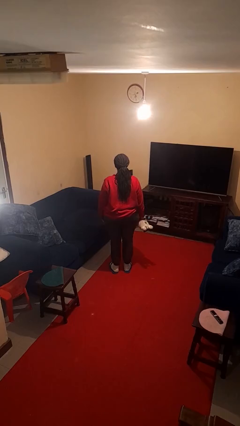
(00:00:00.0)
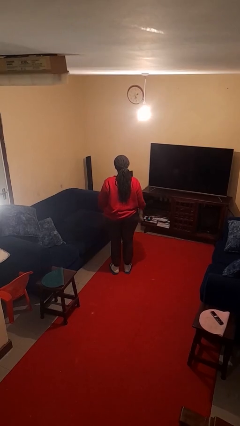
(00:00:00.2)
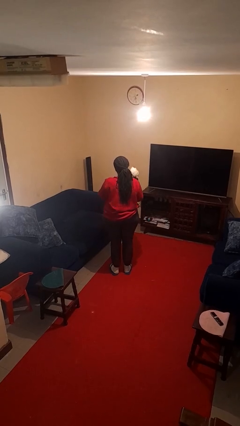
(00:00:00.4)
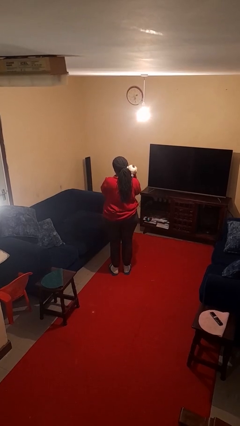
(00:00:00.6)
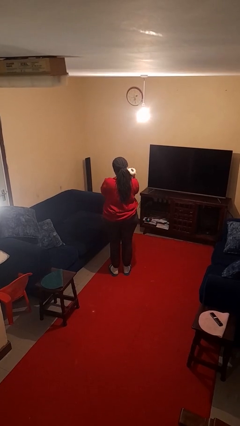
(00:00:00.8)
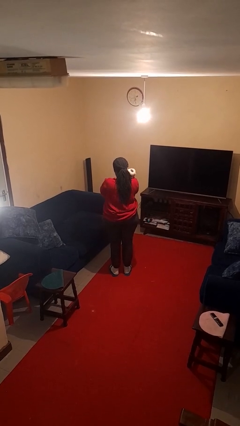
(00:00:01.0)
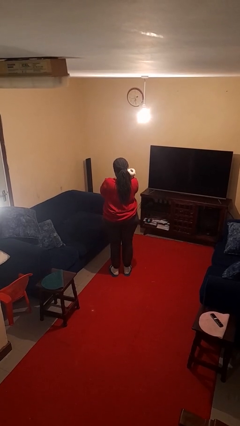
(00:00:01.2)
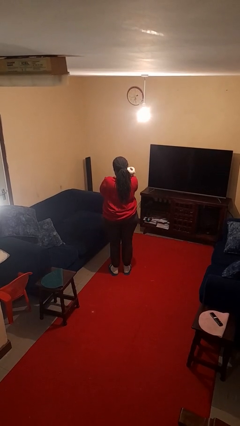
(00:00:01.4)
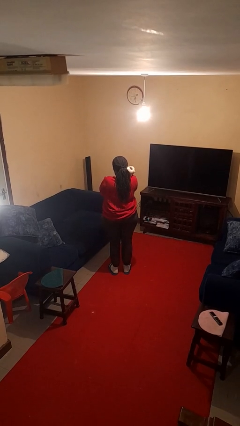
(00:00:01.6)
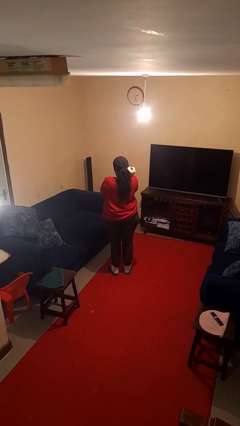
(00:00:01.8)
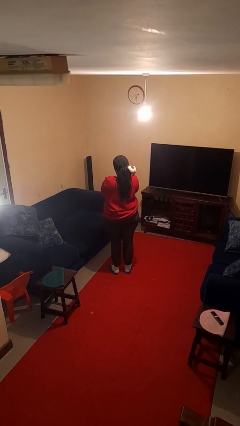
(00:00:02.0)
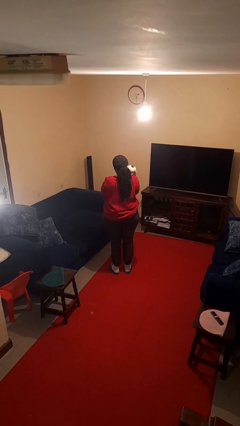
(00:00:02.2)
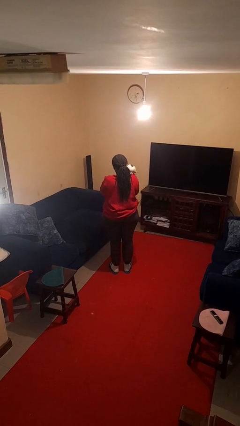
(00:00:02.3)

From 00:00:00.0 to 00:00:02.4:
person hugs stuffed animal

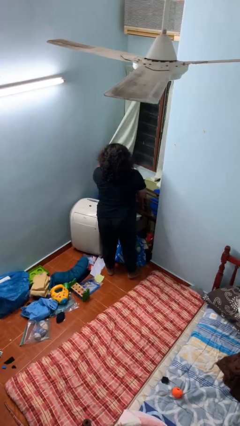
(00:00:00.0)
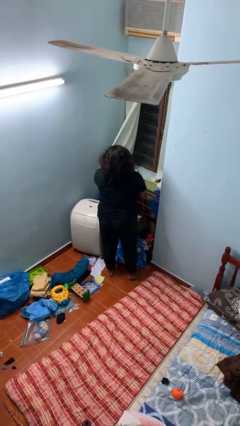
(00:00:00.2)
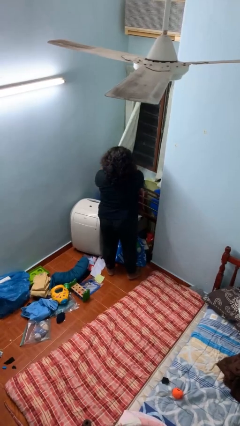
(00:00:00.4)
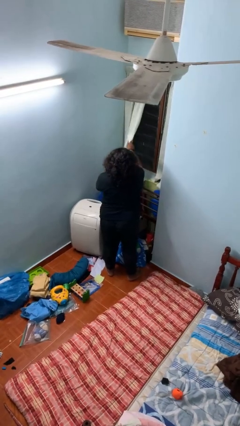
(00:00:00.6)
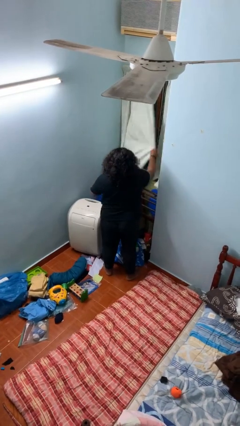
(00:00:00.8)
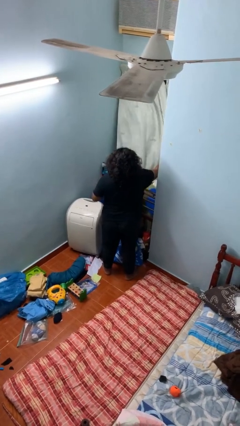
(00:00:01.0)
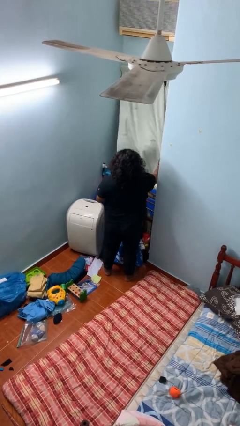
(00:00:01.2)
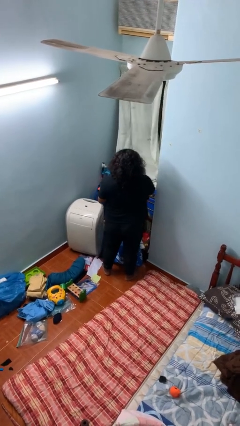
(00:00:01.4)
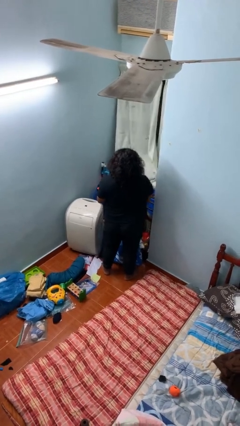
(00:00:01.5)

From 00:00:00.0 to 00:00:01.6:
person closes curtains

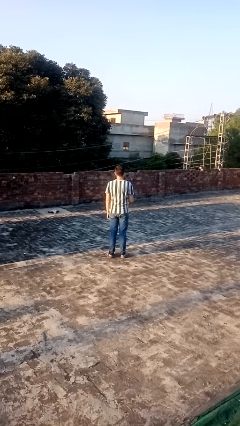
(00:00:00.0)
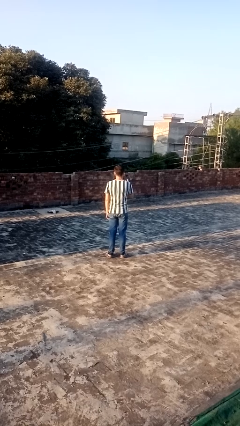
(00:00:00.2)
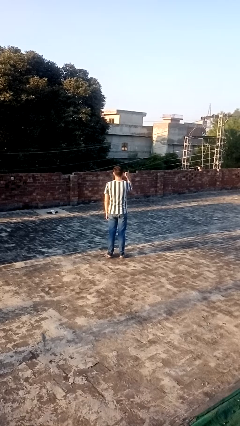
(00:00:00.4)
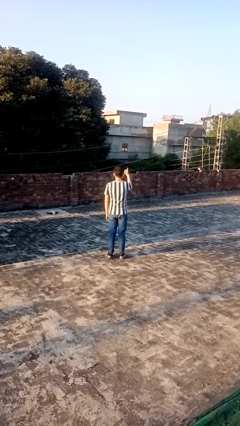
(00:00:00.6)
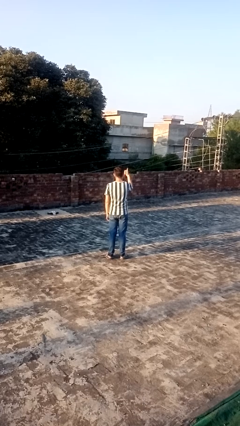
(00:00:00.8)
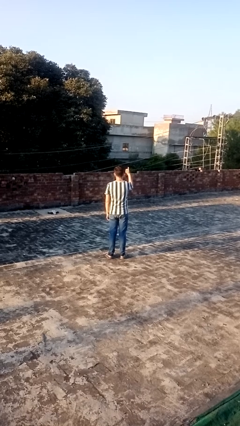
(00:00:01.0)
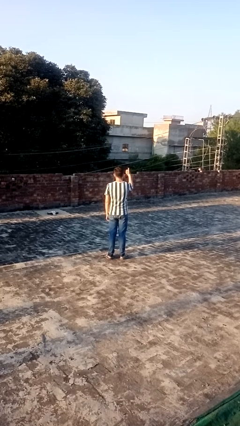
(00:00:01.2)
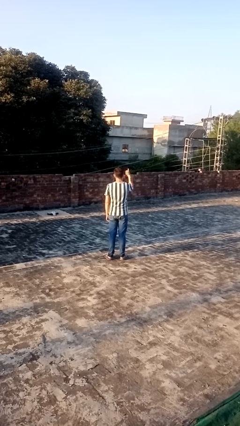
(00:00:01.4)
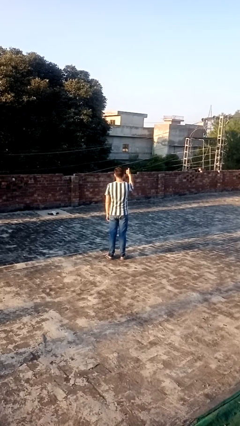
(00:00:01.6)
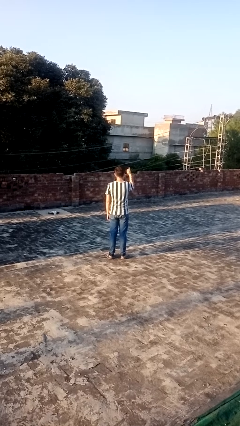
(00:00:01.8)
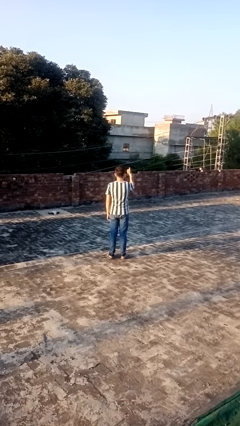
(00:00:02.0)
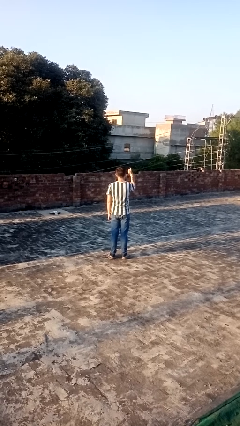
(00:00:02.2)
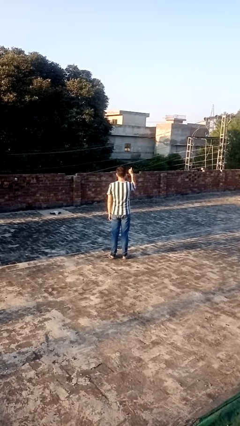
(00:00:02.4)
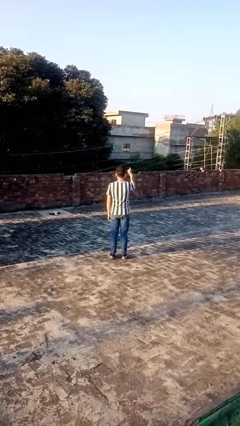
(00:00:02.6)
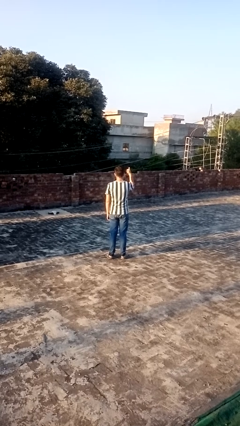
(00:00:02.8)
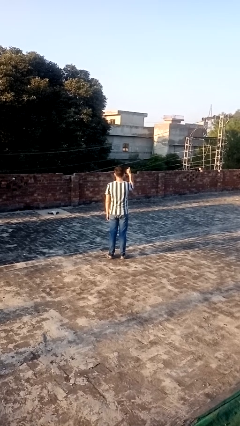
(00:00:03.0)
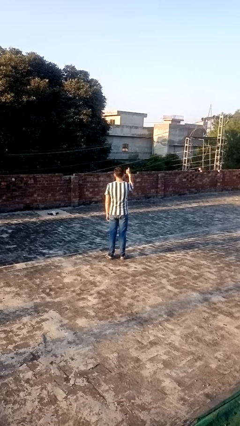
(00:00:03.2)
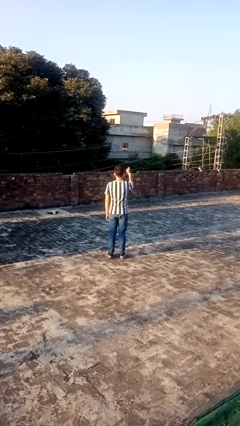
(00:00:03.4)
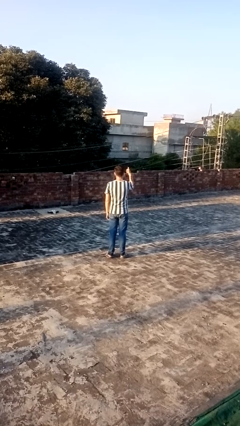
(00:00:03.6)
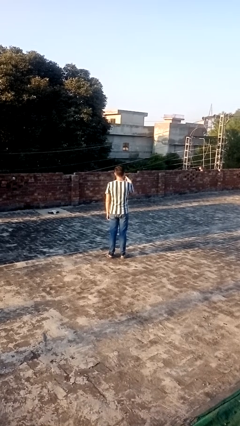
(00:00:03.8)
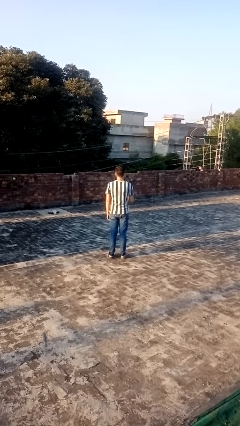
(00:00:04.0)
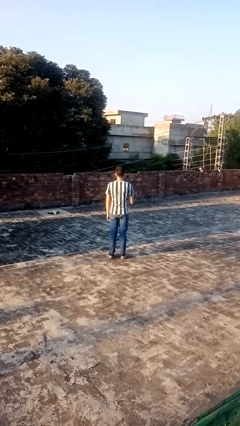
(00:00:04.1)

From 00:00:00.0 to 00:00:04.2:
person gestures thumbs up

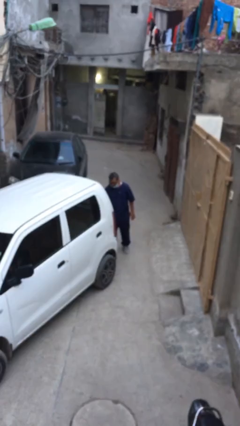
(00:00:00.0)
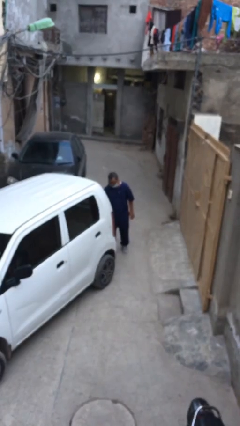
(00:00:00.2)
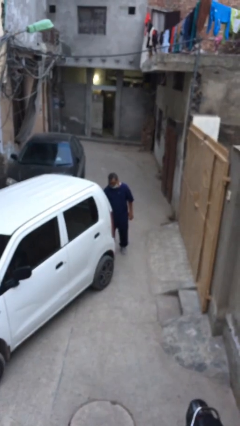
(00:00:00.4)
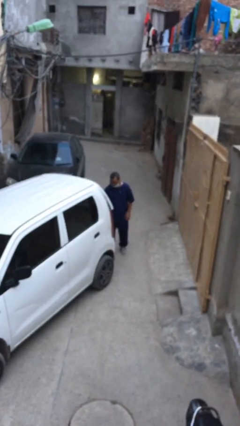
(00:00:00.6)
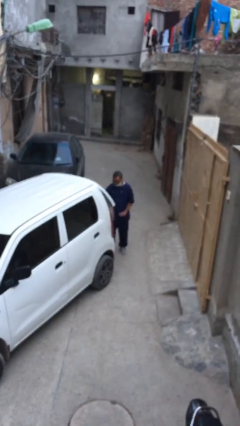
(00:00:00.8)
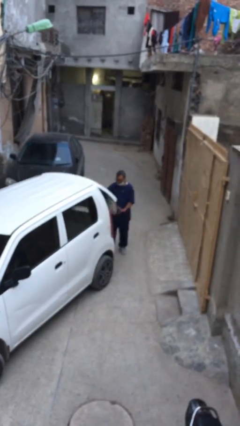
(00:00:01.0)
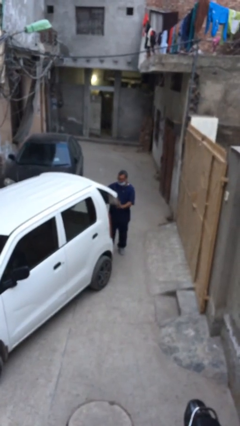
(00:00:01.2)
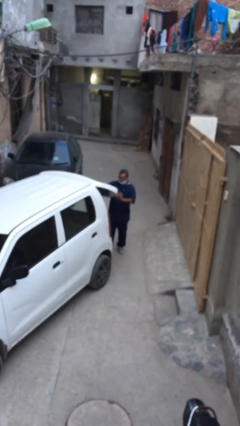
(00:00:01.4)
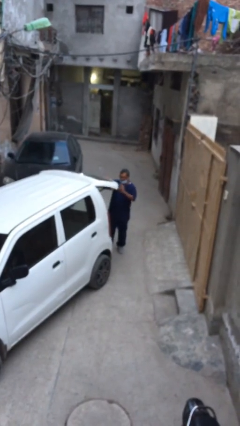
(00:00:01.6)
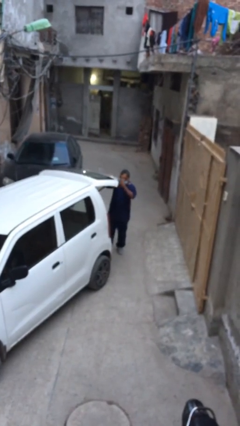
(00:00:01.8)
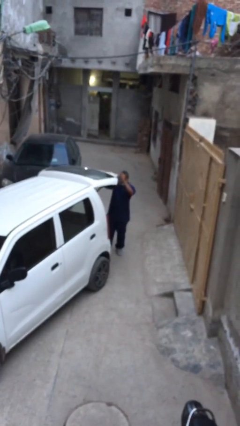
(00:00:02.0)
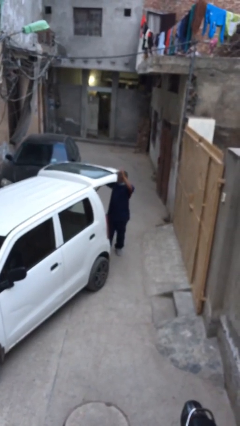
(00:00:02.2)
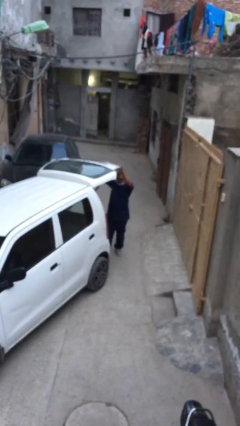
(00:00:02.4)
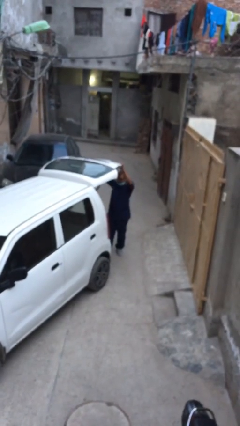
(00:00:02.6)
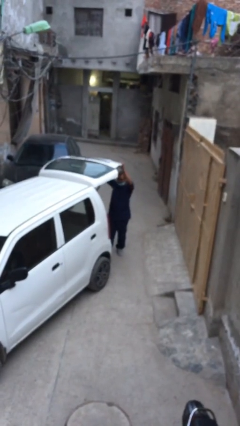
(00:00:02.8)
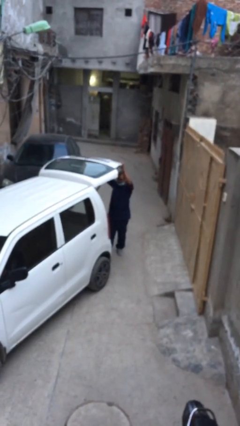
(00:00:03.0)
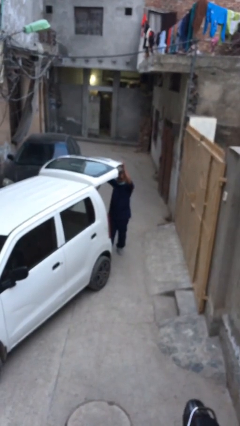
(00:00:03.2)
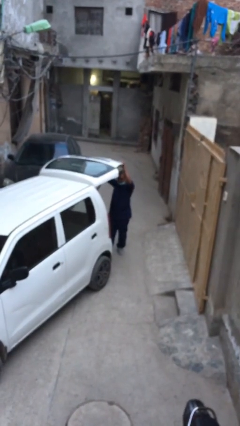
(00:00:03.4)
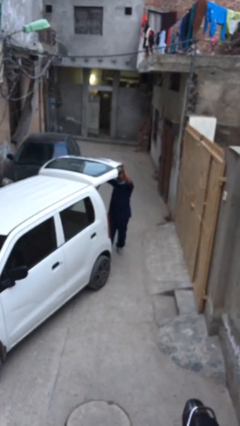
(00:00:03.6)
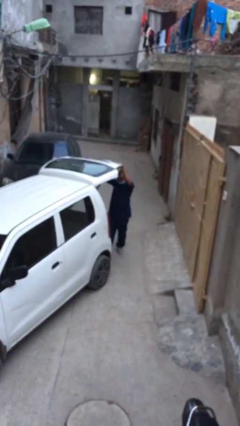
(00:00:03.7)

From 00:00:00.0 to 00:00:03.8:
person opens car trunk

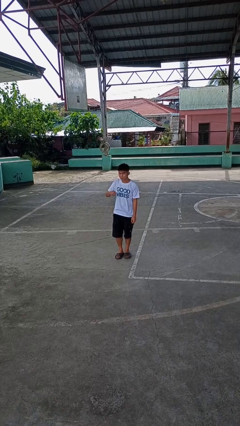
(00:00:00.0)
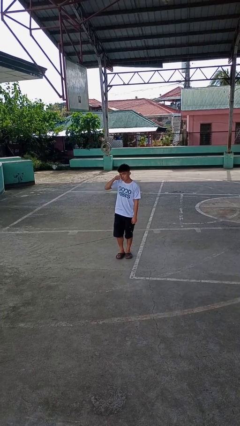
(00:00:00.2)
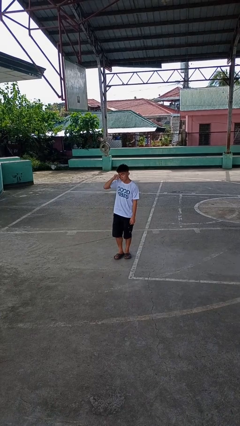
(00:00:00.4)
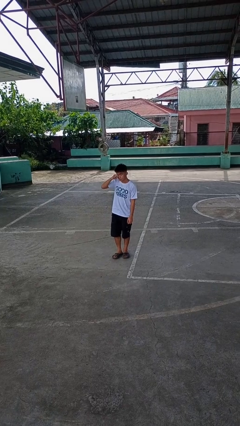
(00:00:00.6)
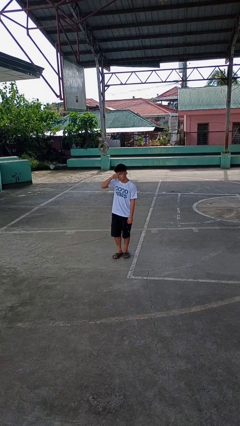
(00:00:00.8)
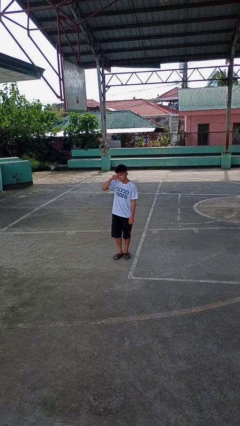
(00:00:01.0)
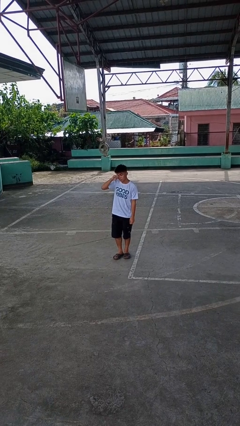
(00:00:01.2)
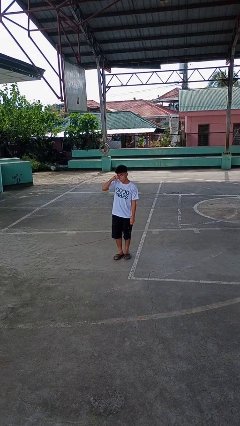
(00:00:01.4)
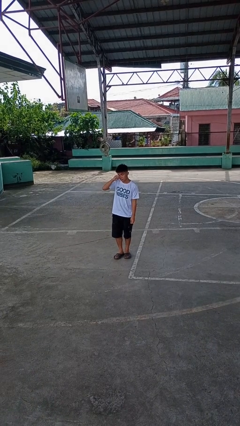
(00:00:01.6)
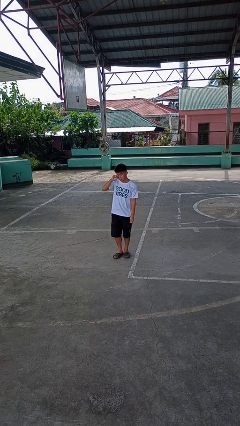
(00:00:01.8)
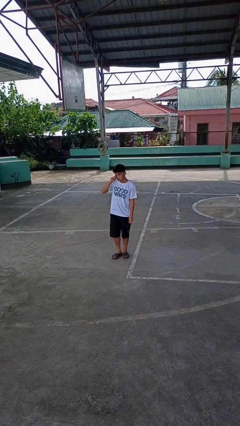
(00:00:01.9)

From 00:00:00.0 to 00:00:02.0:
person rubs eyes

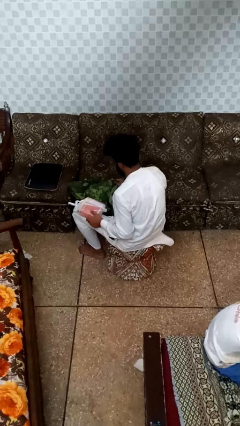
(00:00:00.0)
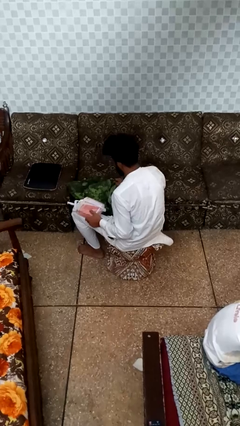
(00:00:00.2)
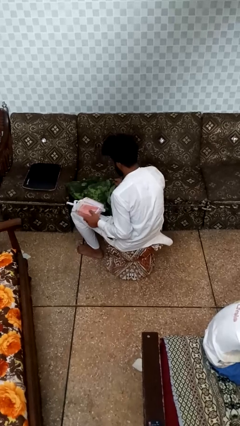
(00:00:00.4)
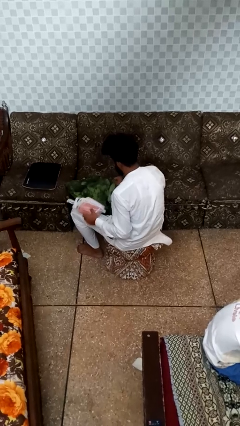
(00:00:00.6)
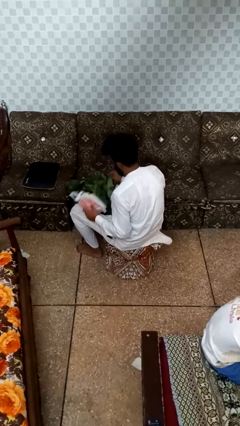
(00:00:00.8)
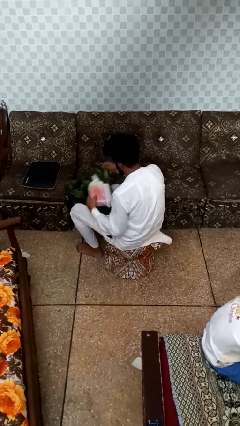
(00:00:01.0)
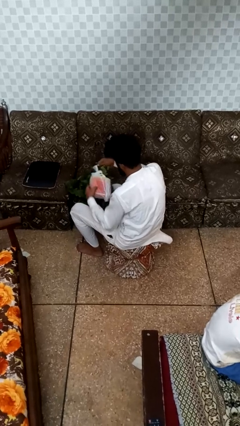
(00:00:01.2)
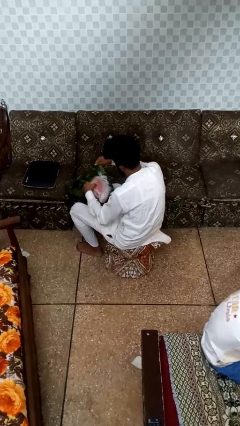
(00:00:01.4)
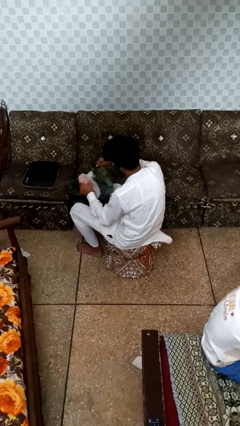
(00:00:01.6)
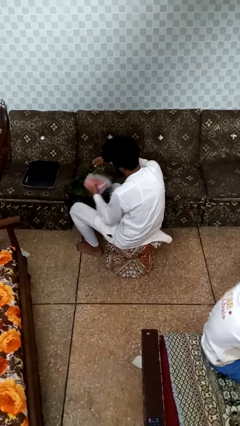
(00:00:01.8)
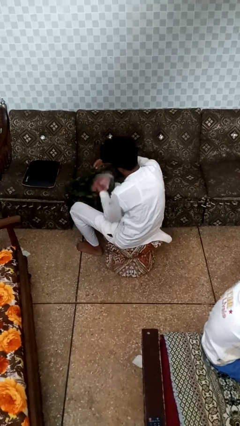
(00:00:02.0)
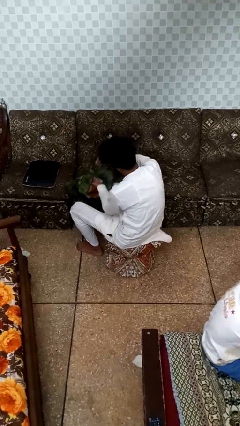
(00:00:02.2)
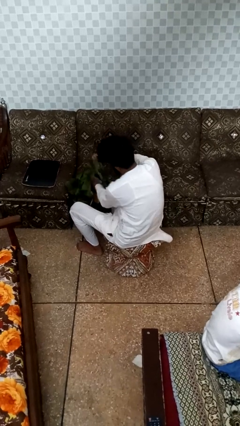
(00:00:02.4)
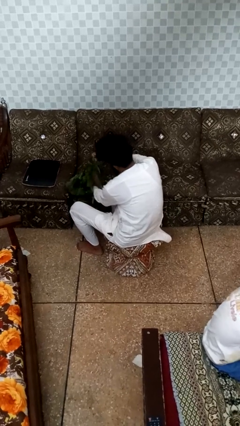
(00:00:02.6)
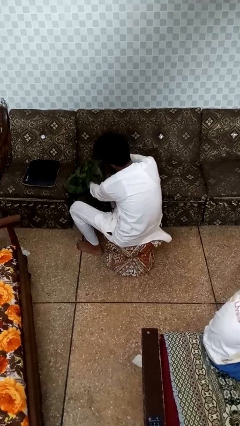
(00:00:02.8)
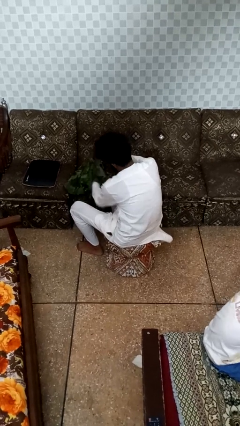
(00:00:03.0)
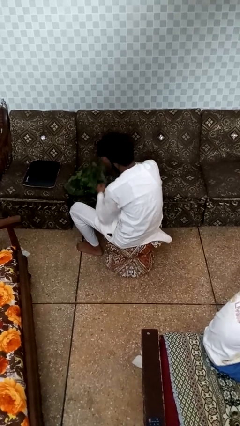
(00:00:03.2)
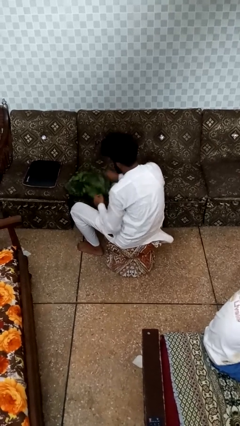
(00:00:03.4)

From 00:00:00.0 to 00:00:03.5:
person puts object into bag
